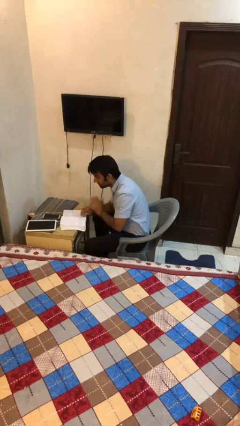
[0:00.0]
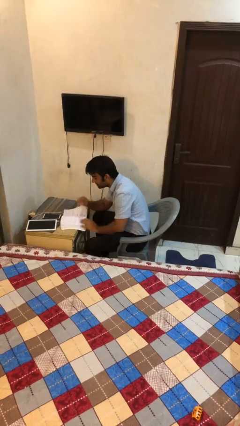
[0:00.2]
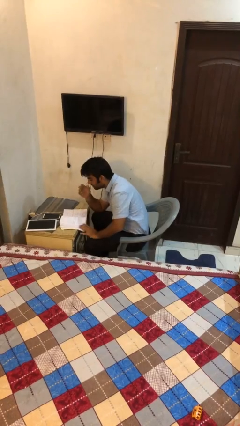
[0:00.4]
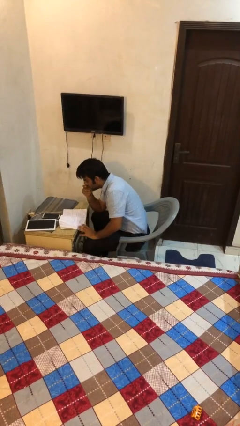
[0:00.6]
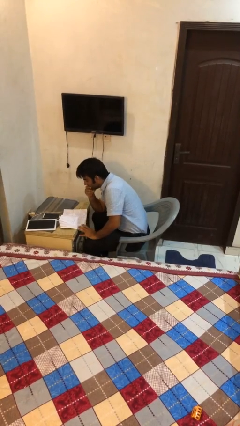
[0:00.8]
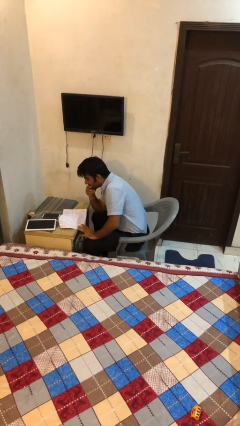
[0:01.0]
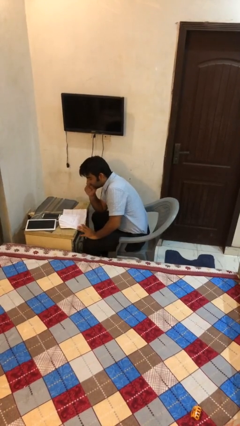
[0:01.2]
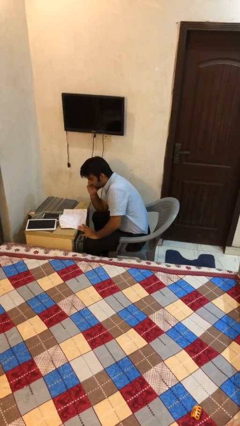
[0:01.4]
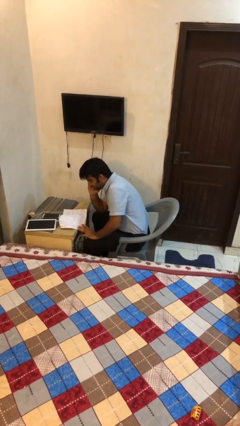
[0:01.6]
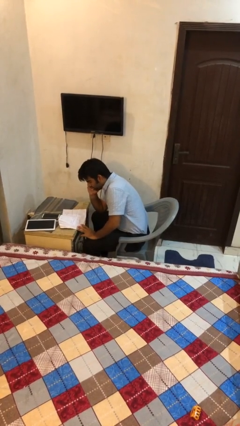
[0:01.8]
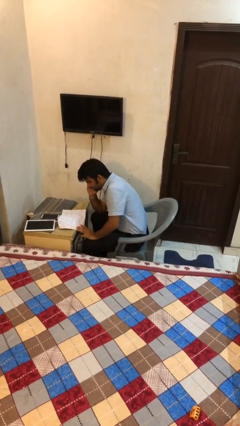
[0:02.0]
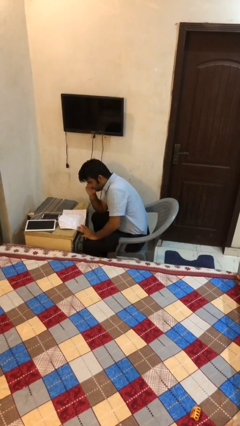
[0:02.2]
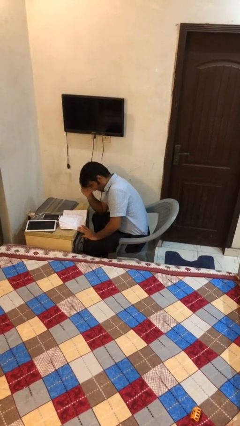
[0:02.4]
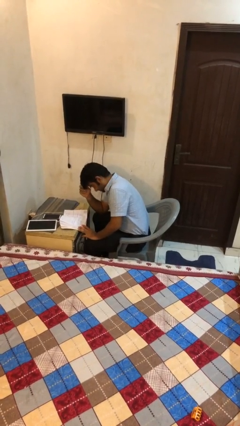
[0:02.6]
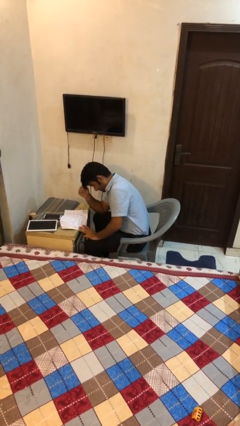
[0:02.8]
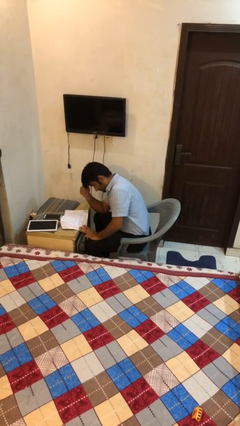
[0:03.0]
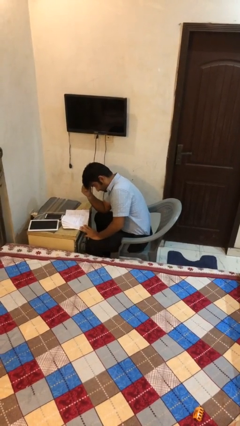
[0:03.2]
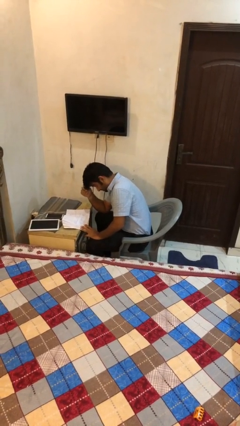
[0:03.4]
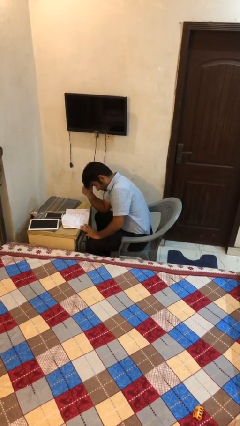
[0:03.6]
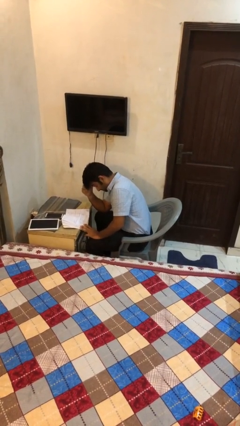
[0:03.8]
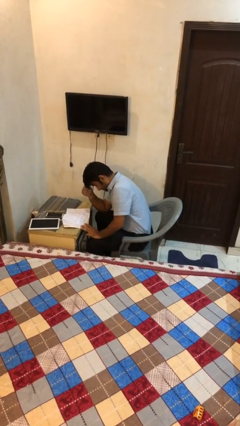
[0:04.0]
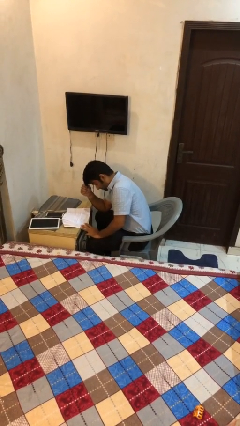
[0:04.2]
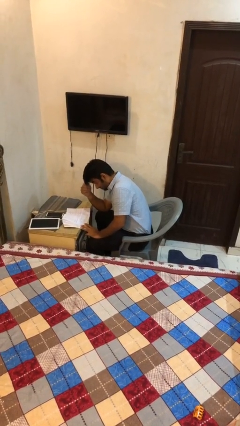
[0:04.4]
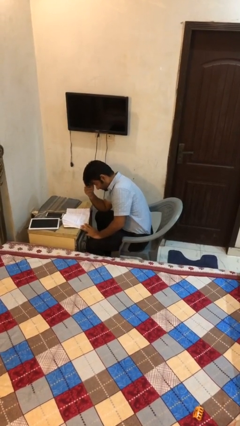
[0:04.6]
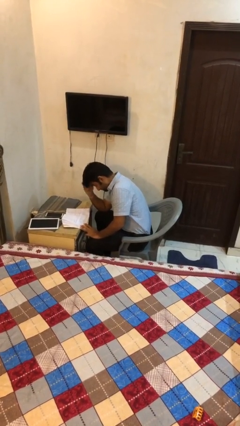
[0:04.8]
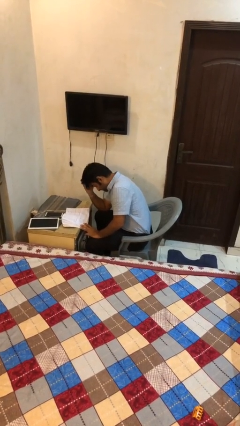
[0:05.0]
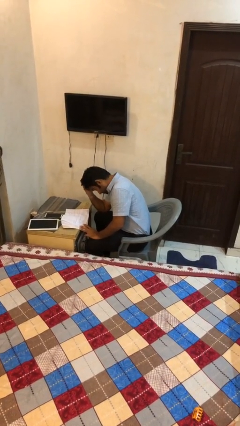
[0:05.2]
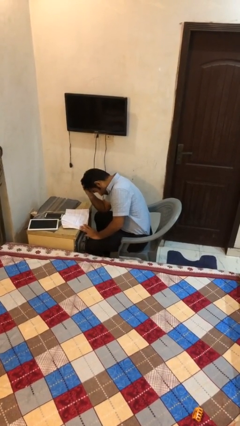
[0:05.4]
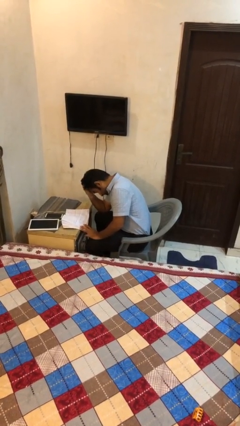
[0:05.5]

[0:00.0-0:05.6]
person reads document

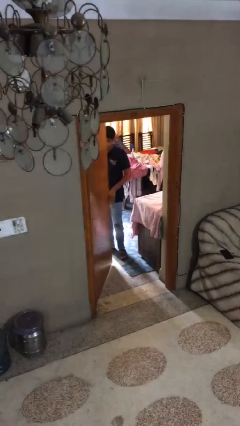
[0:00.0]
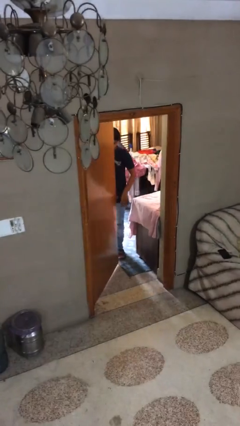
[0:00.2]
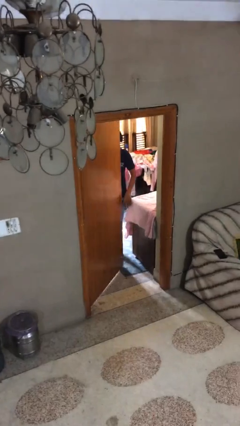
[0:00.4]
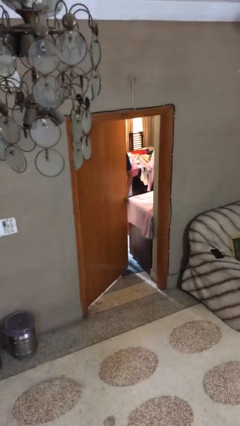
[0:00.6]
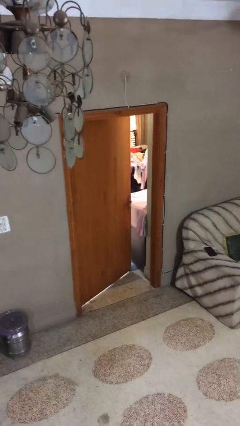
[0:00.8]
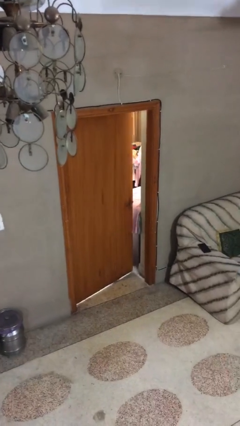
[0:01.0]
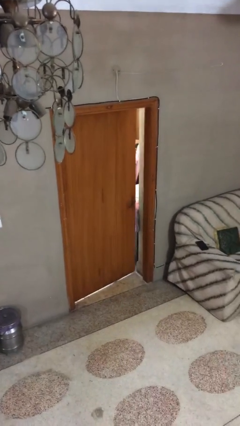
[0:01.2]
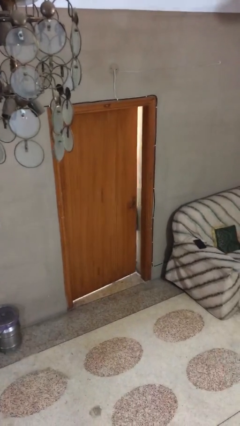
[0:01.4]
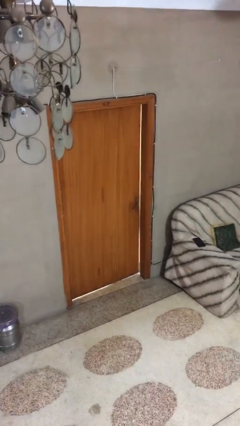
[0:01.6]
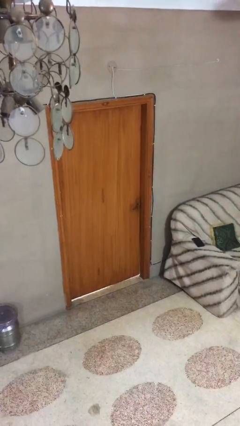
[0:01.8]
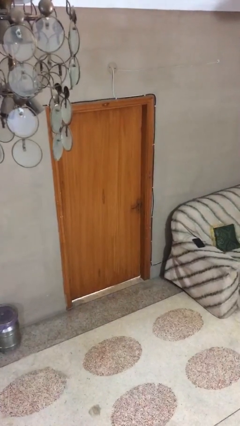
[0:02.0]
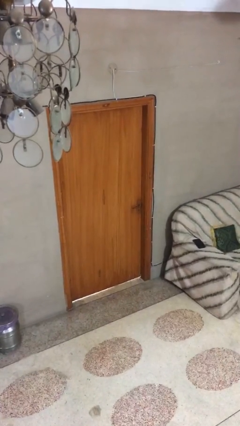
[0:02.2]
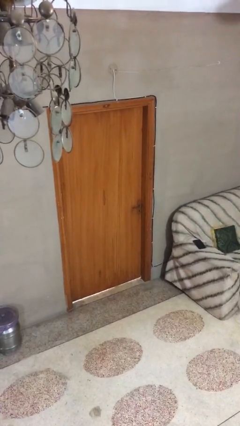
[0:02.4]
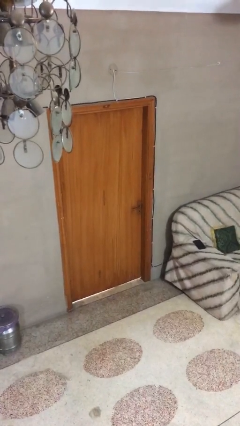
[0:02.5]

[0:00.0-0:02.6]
person closes facility door

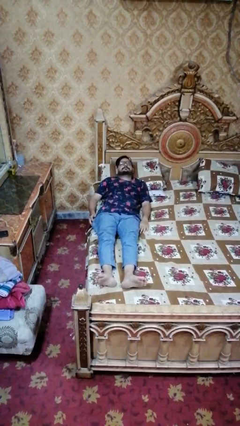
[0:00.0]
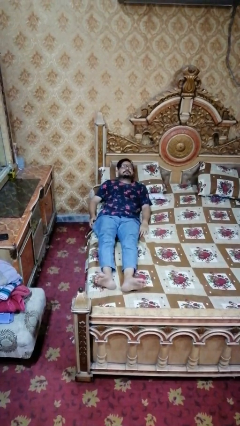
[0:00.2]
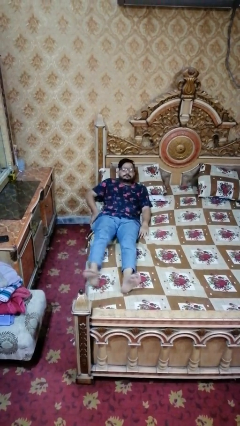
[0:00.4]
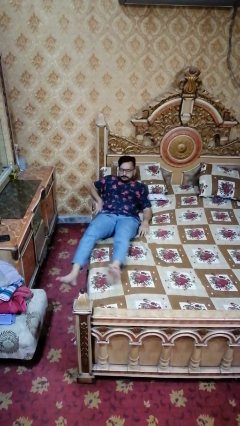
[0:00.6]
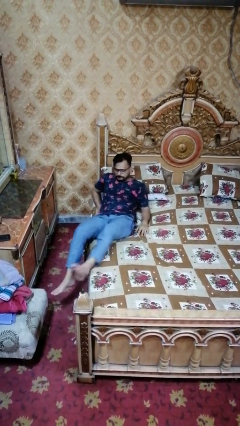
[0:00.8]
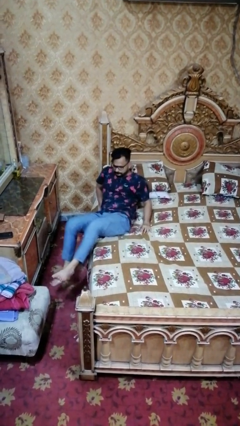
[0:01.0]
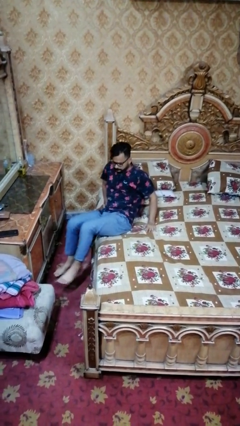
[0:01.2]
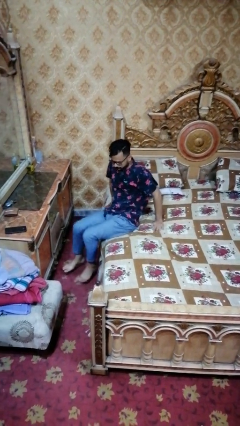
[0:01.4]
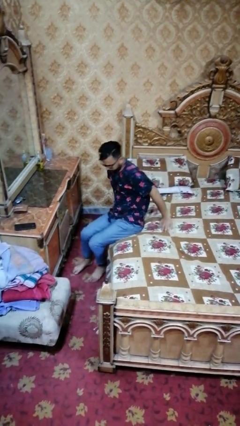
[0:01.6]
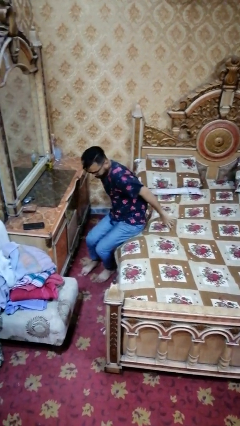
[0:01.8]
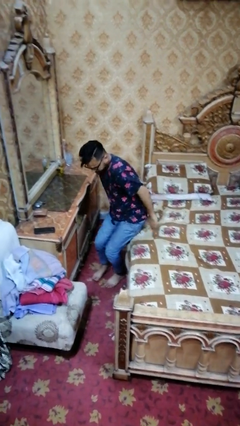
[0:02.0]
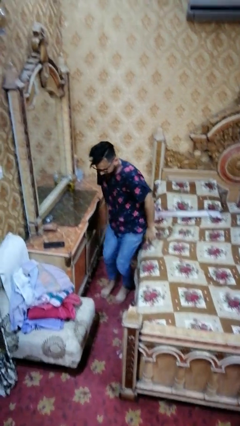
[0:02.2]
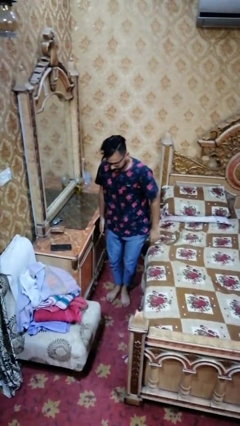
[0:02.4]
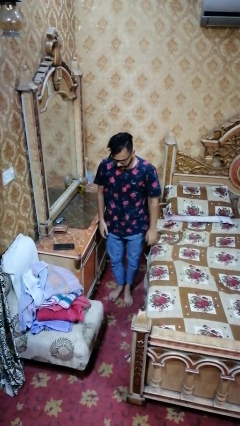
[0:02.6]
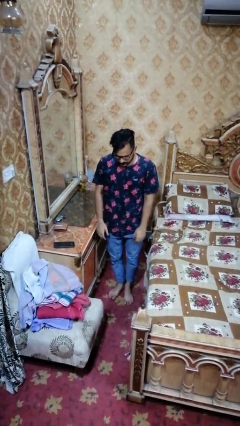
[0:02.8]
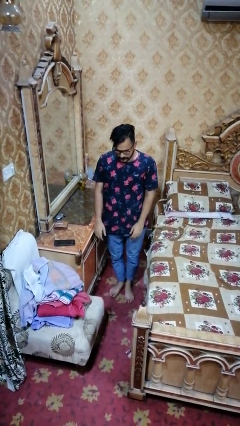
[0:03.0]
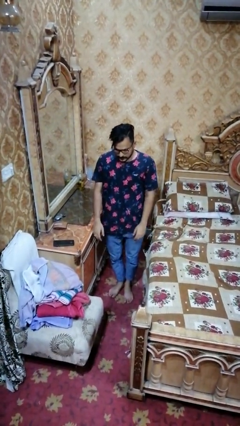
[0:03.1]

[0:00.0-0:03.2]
person stands up

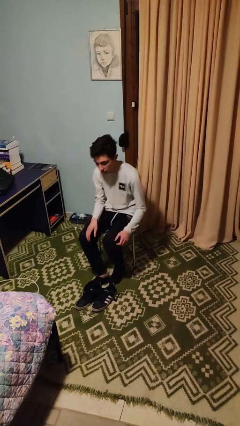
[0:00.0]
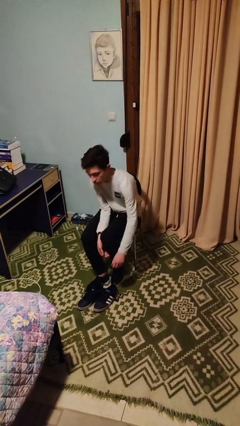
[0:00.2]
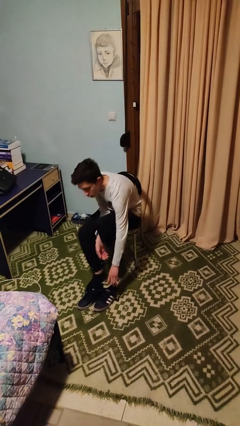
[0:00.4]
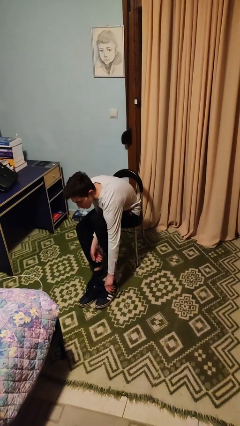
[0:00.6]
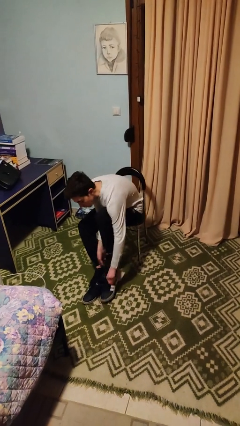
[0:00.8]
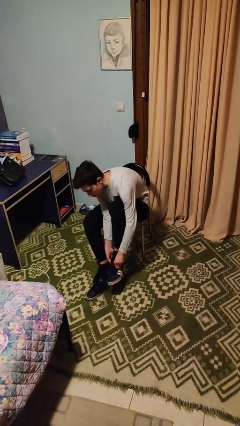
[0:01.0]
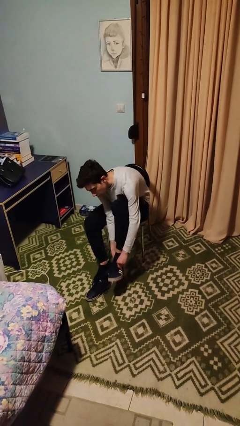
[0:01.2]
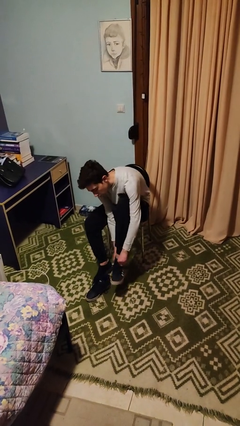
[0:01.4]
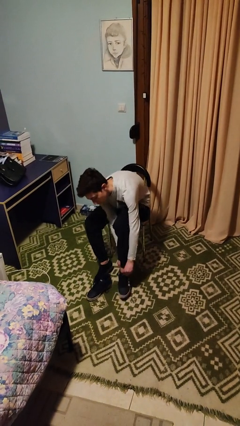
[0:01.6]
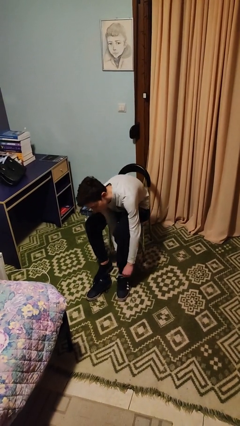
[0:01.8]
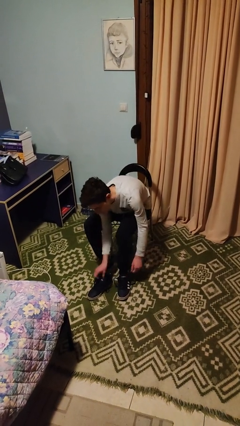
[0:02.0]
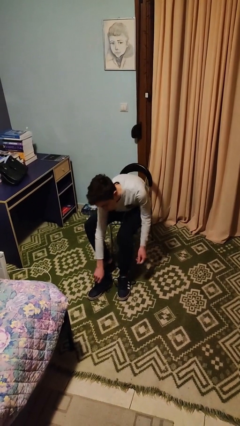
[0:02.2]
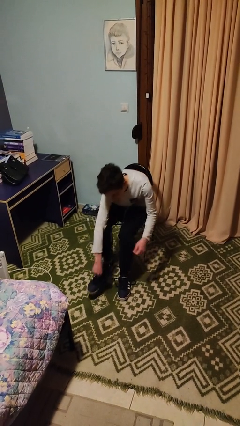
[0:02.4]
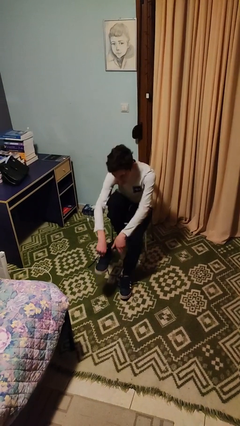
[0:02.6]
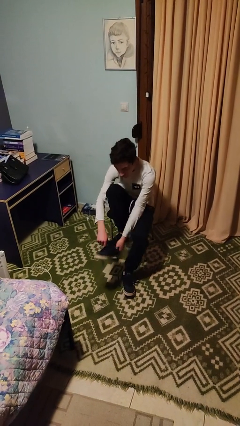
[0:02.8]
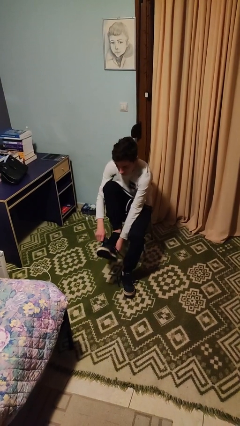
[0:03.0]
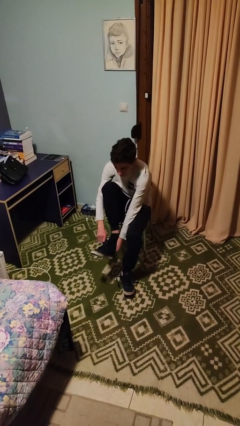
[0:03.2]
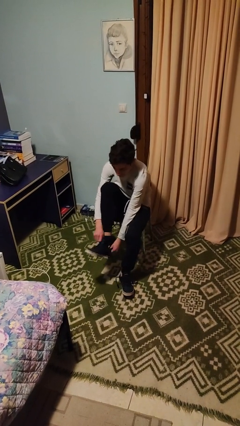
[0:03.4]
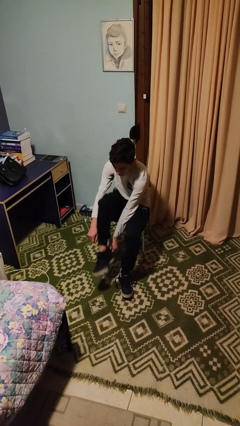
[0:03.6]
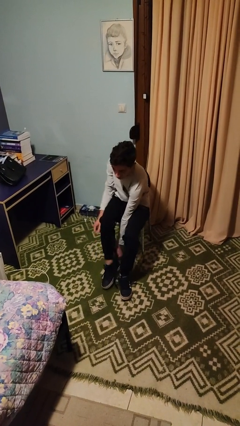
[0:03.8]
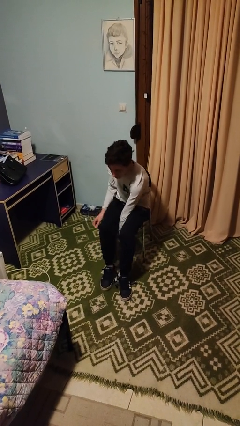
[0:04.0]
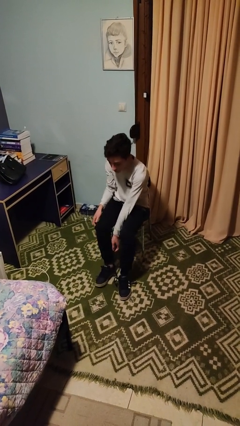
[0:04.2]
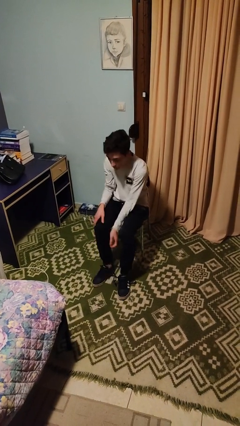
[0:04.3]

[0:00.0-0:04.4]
person puts on shoes

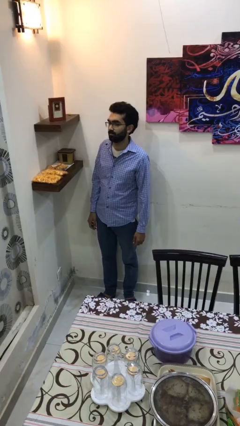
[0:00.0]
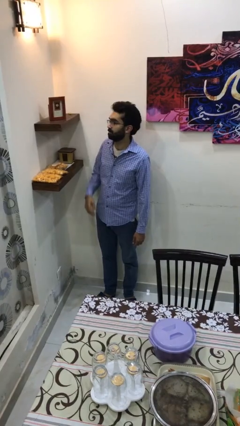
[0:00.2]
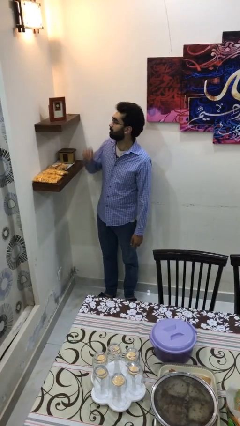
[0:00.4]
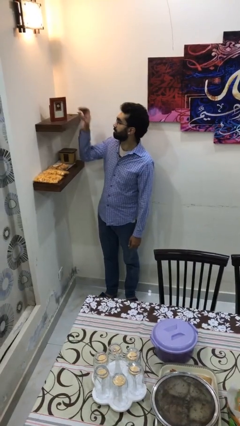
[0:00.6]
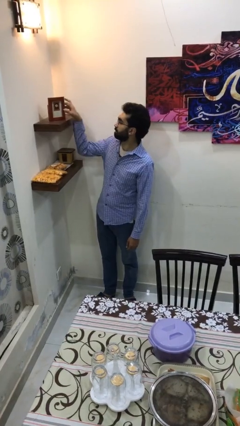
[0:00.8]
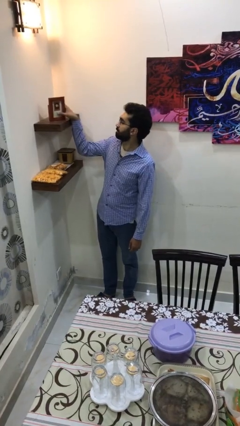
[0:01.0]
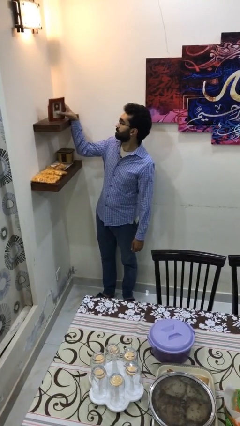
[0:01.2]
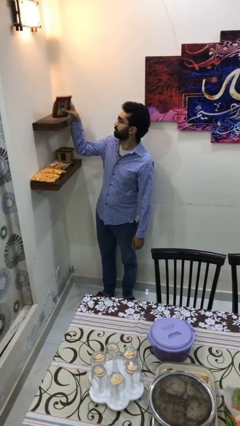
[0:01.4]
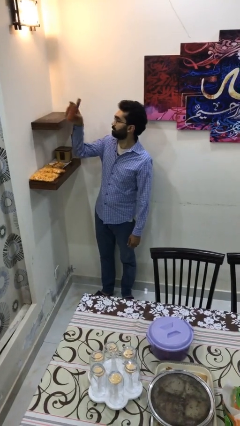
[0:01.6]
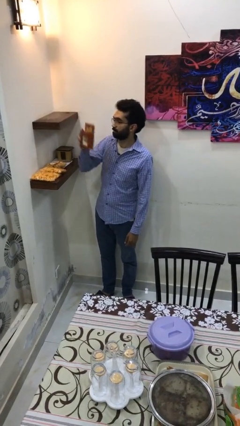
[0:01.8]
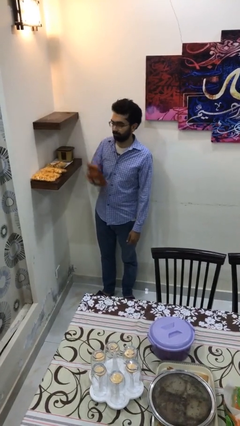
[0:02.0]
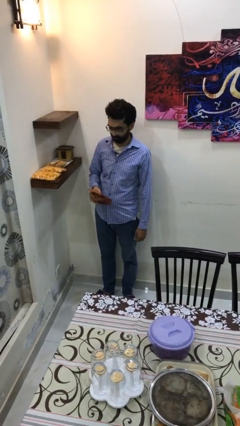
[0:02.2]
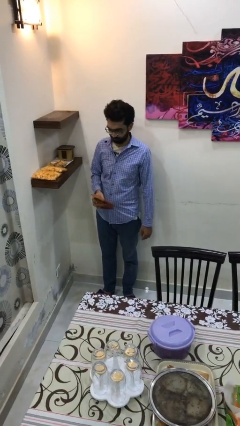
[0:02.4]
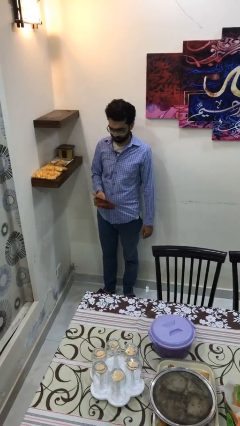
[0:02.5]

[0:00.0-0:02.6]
person picks up object from shelf
